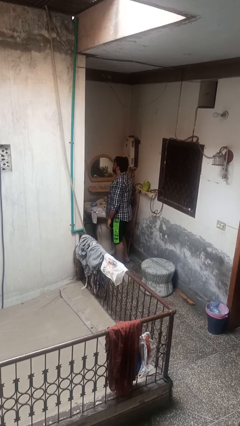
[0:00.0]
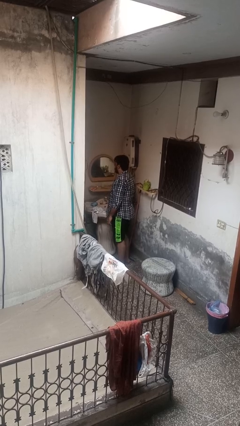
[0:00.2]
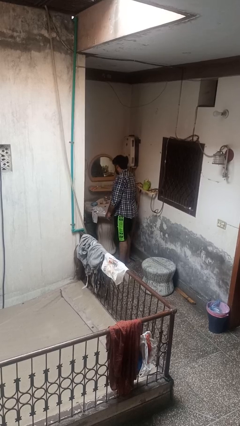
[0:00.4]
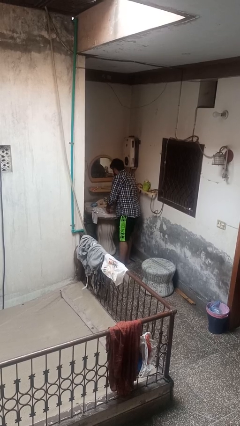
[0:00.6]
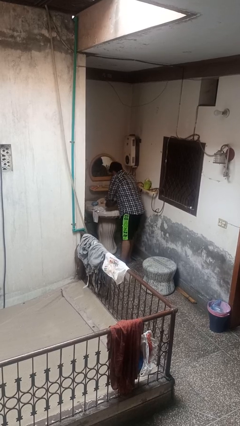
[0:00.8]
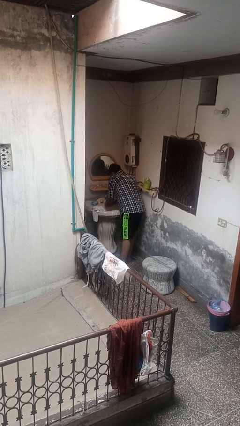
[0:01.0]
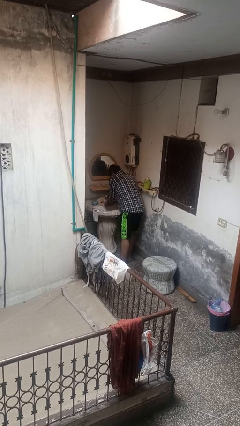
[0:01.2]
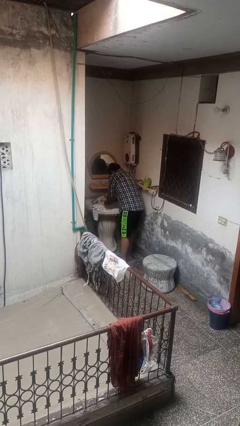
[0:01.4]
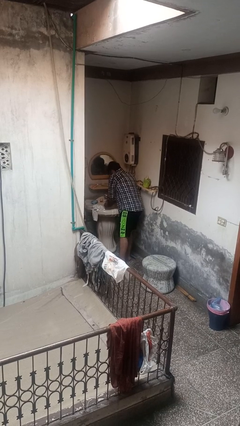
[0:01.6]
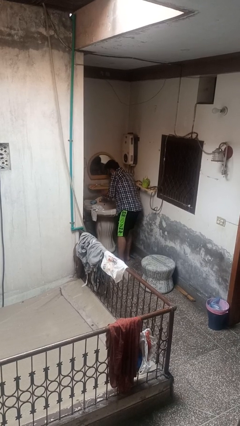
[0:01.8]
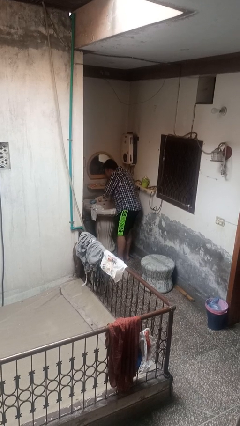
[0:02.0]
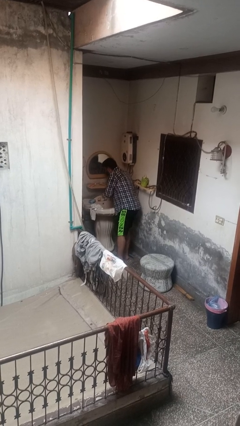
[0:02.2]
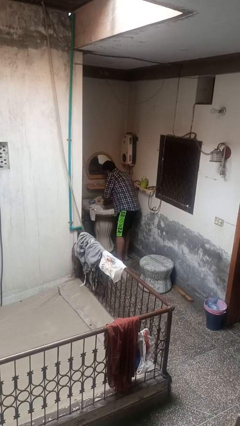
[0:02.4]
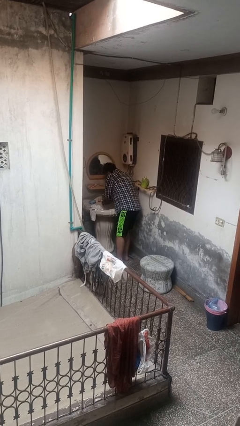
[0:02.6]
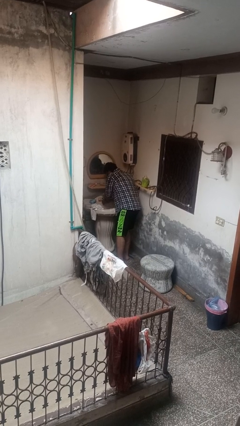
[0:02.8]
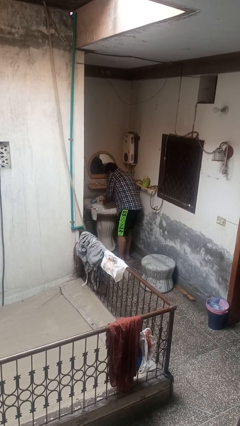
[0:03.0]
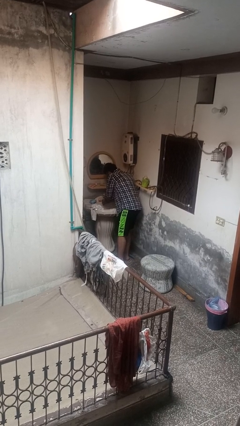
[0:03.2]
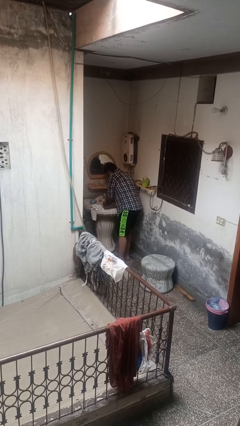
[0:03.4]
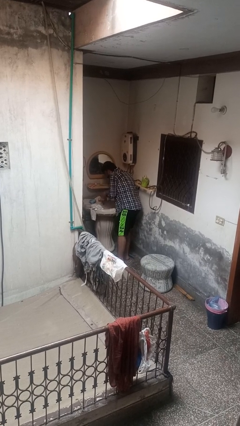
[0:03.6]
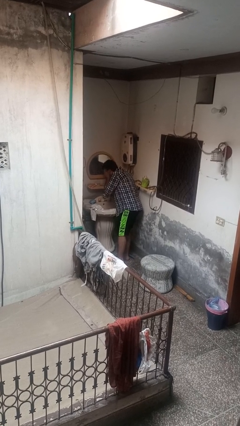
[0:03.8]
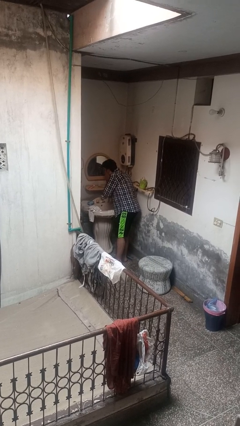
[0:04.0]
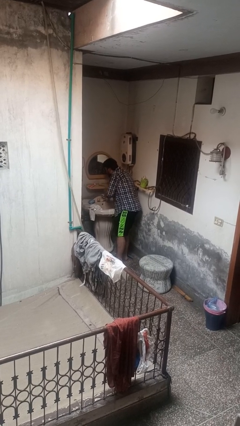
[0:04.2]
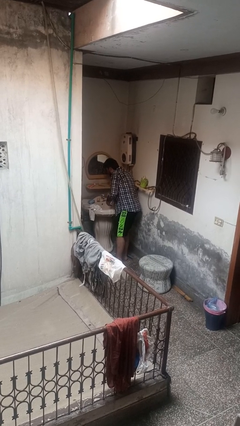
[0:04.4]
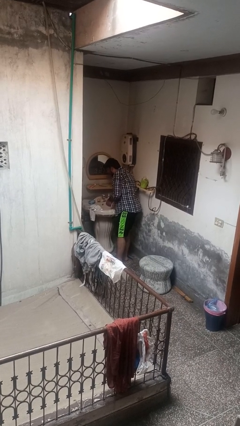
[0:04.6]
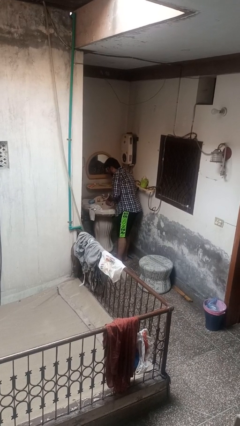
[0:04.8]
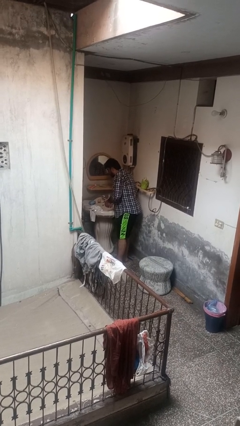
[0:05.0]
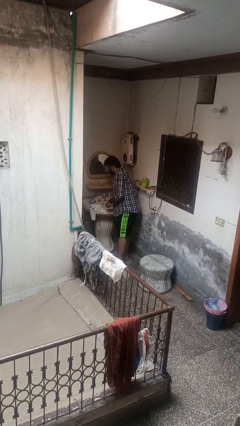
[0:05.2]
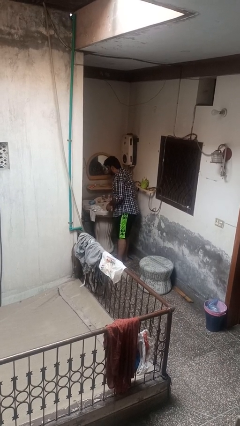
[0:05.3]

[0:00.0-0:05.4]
person washes face

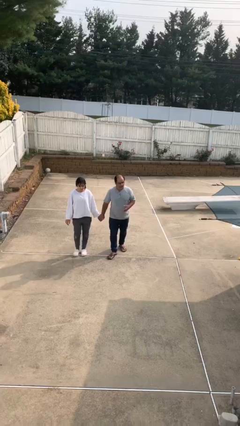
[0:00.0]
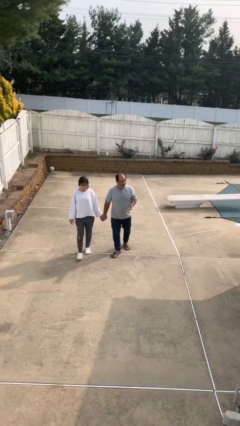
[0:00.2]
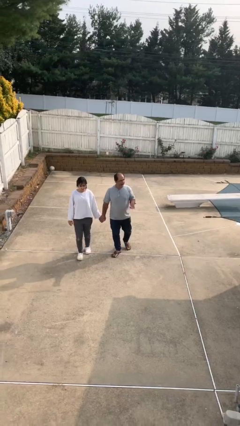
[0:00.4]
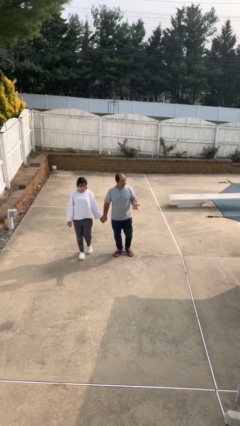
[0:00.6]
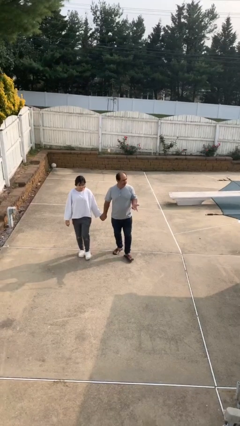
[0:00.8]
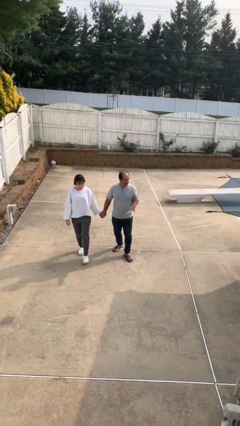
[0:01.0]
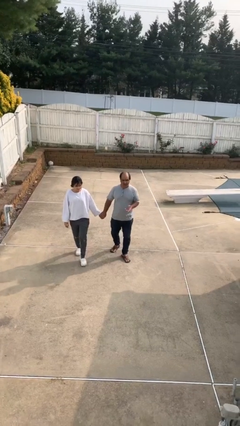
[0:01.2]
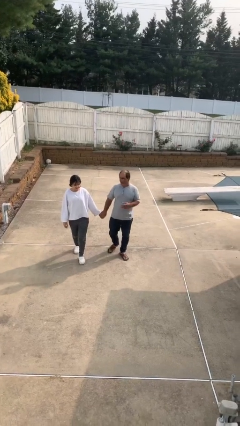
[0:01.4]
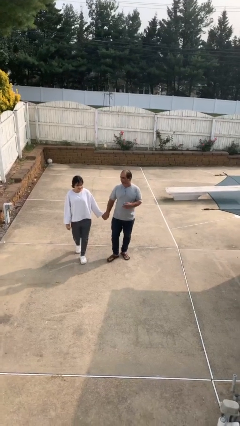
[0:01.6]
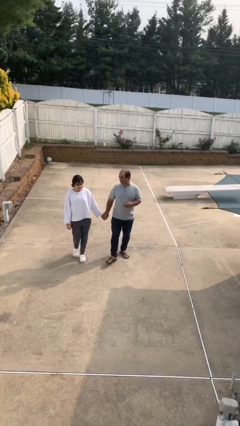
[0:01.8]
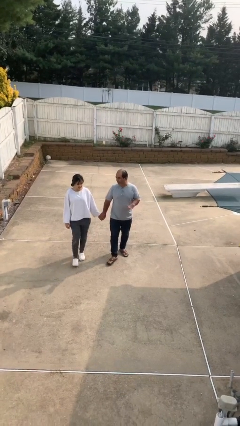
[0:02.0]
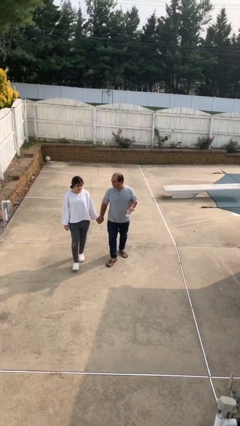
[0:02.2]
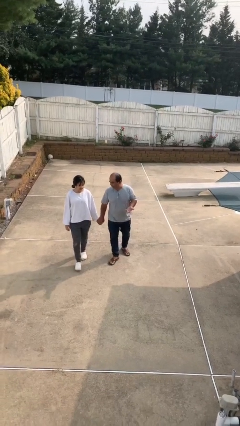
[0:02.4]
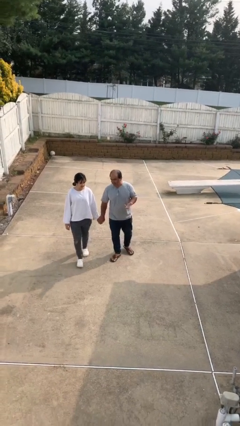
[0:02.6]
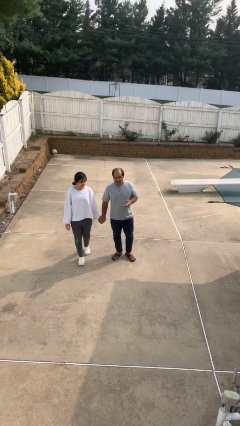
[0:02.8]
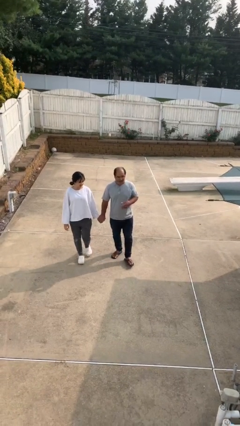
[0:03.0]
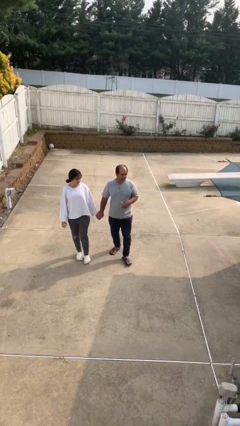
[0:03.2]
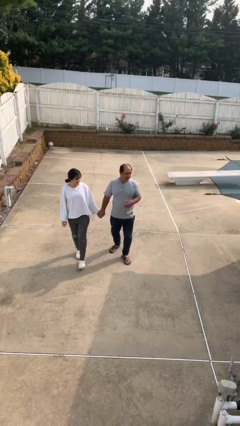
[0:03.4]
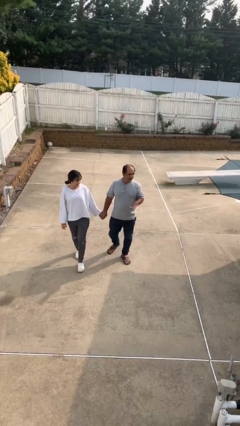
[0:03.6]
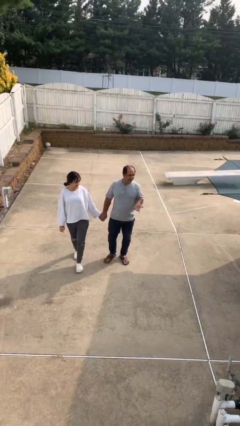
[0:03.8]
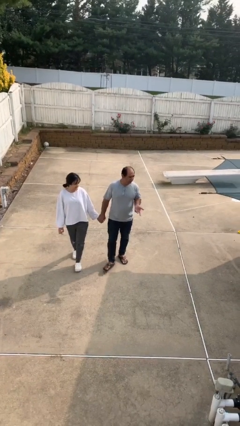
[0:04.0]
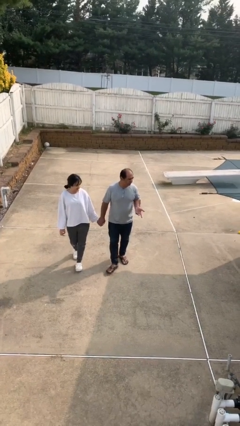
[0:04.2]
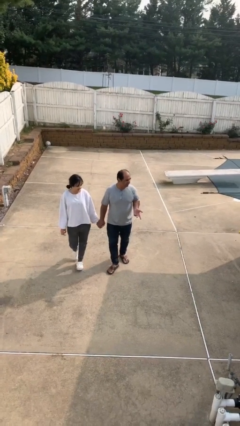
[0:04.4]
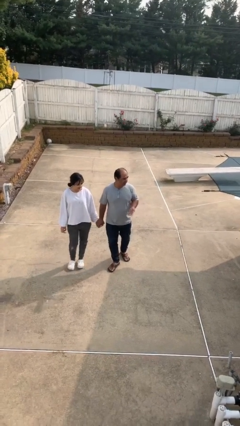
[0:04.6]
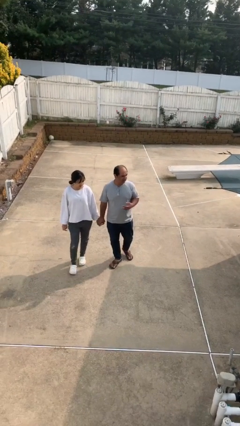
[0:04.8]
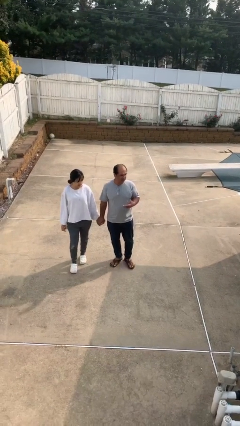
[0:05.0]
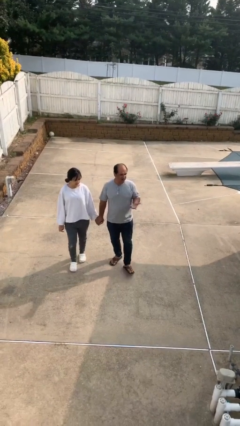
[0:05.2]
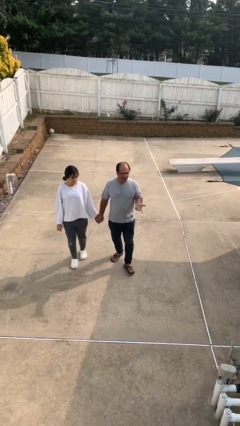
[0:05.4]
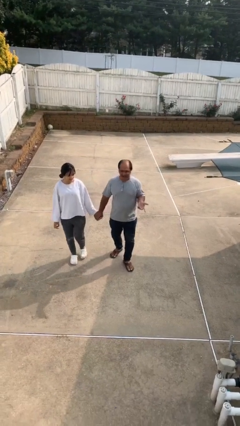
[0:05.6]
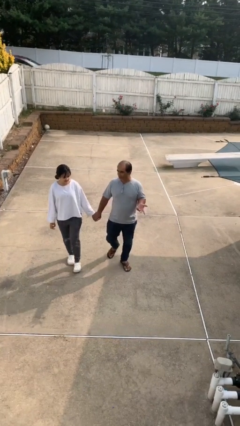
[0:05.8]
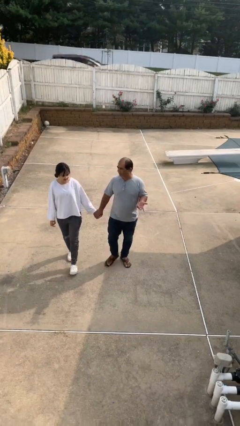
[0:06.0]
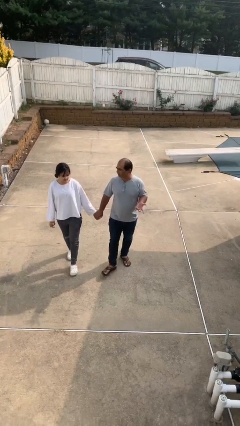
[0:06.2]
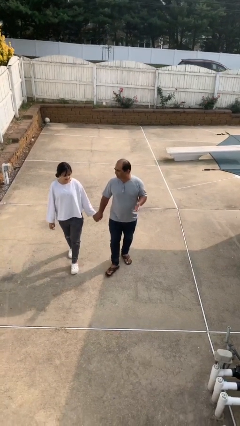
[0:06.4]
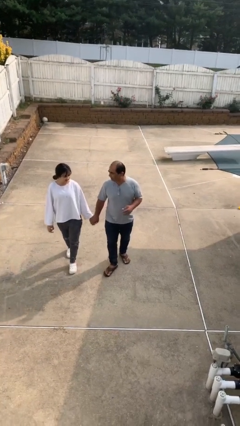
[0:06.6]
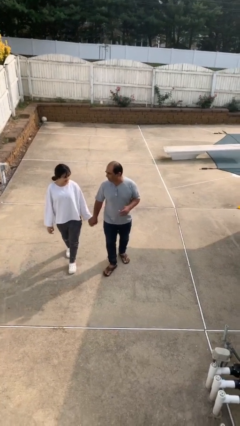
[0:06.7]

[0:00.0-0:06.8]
person holds hand

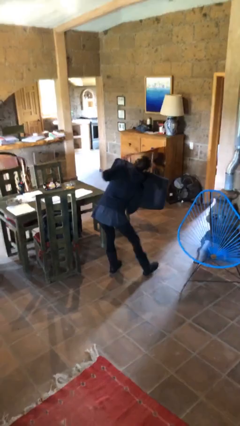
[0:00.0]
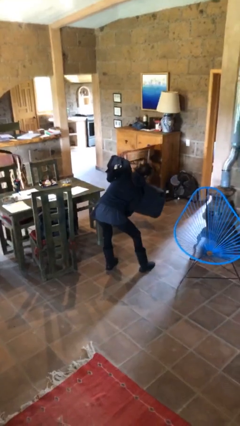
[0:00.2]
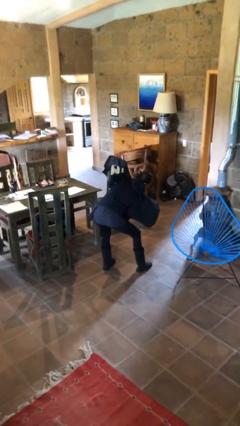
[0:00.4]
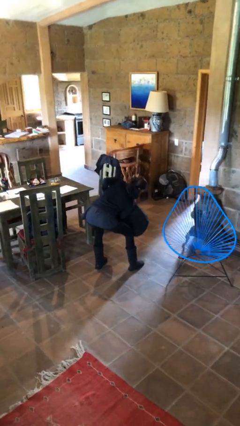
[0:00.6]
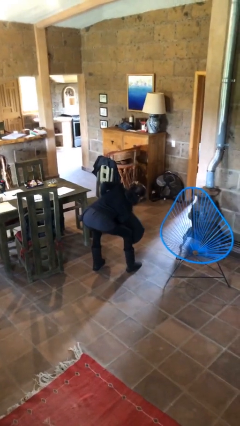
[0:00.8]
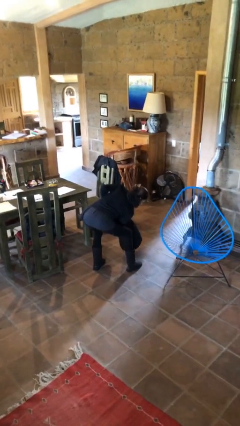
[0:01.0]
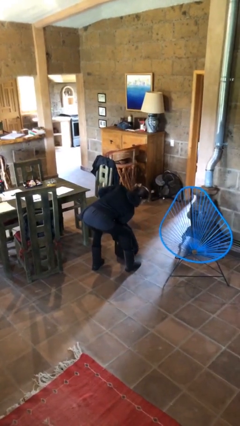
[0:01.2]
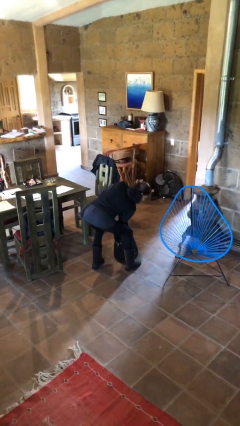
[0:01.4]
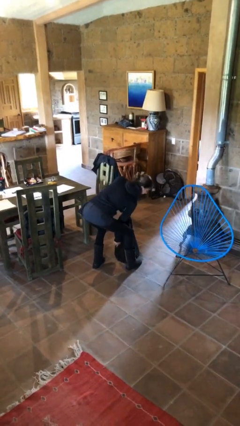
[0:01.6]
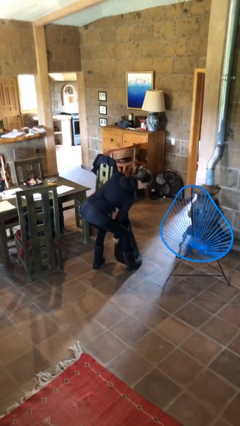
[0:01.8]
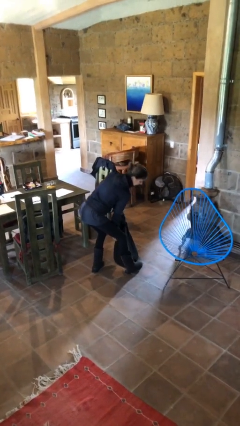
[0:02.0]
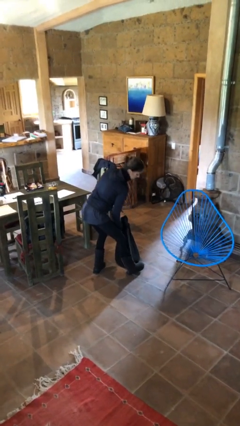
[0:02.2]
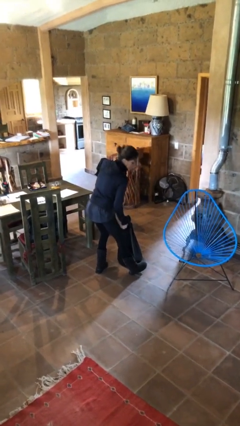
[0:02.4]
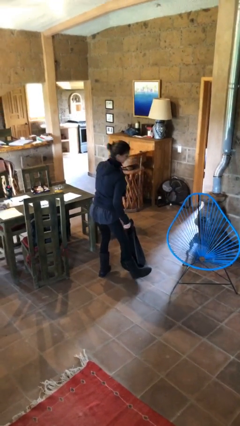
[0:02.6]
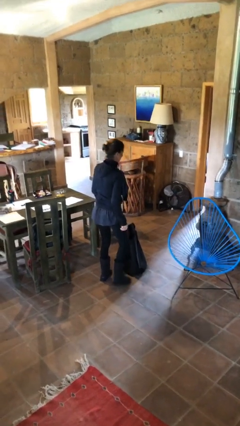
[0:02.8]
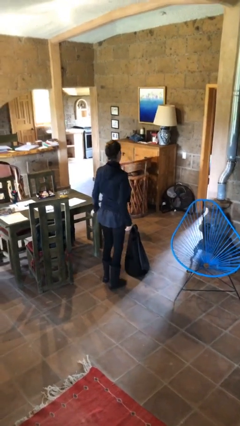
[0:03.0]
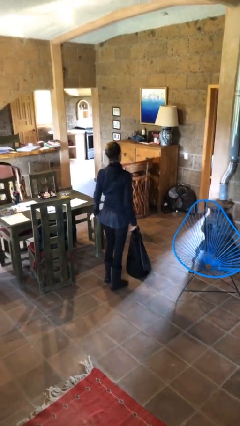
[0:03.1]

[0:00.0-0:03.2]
person puts down object on floor

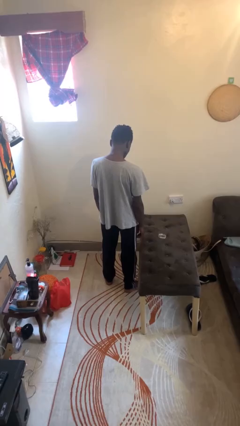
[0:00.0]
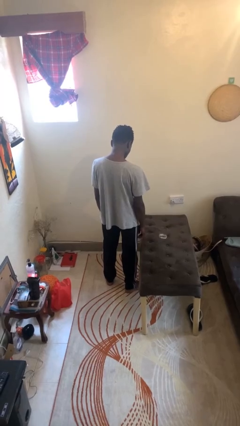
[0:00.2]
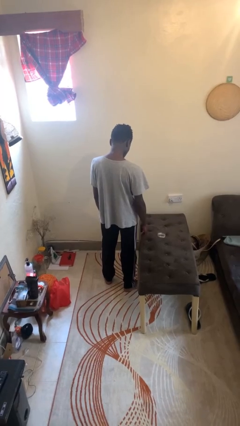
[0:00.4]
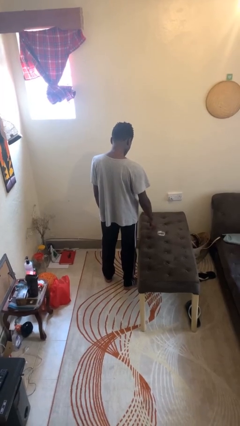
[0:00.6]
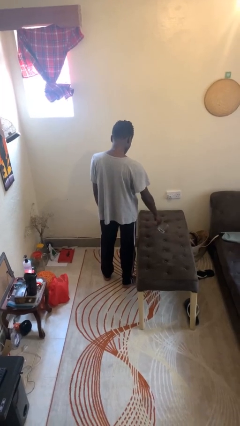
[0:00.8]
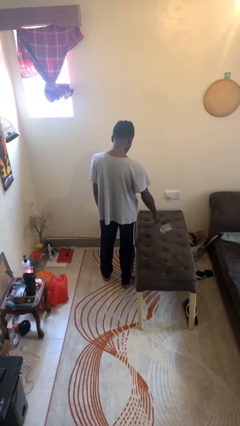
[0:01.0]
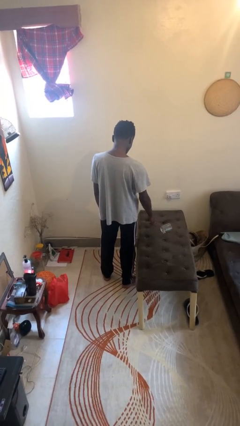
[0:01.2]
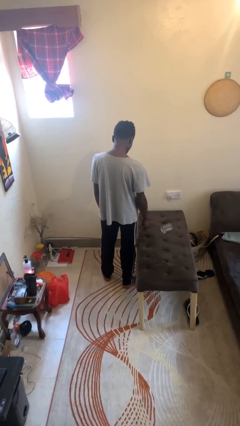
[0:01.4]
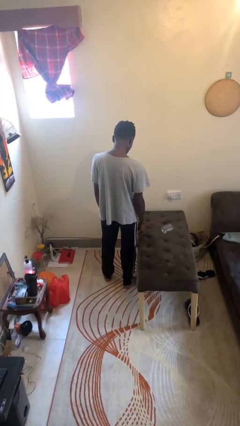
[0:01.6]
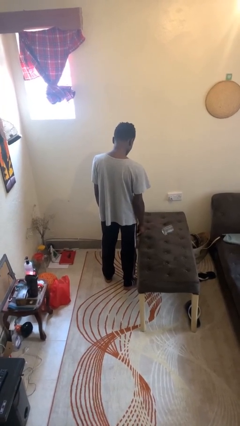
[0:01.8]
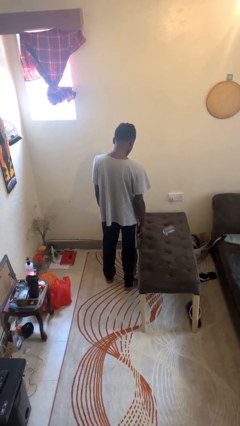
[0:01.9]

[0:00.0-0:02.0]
person knocks over glass

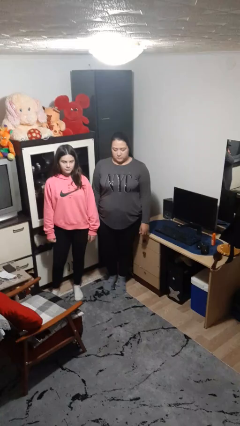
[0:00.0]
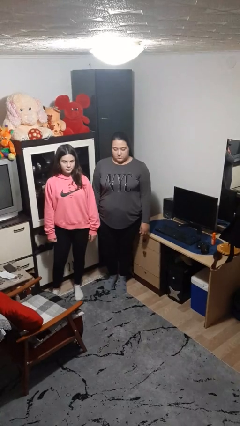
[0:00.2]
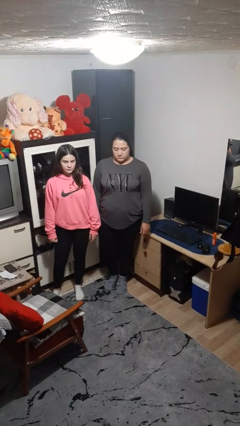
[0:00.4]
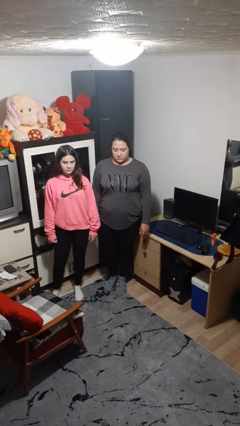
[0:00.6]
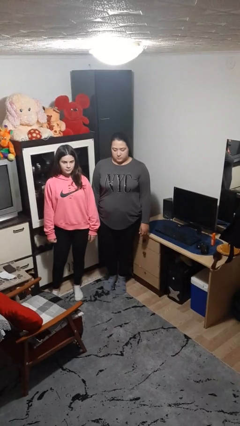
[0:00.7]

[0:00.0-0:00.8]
person hugs person from side
